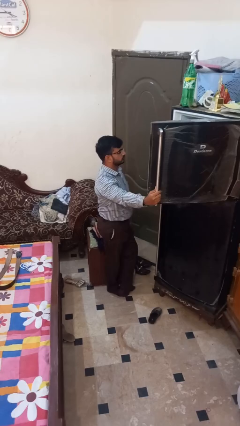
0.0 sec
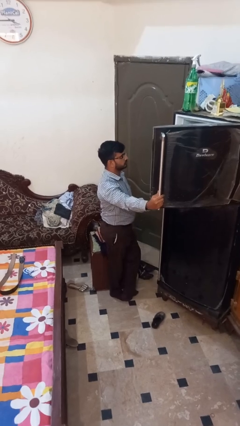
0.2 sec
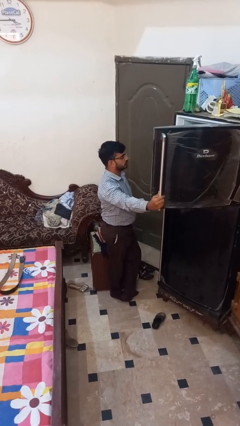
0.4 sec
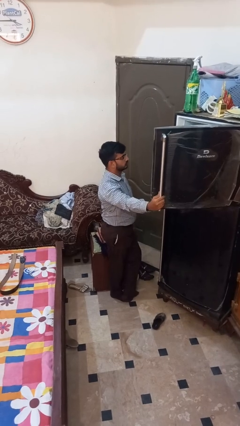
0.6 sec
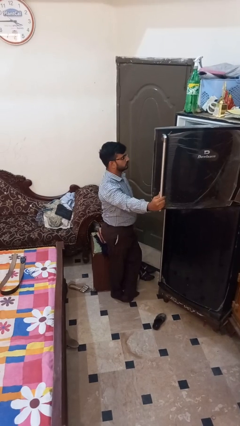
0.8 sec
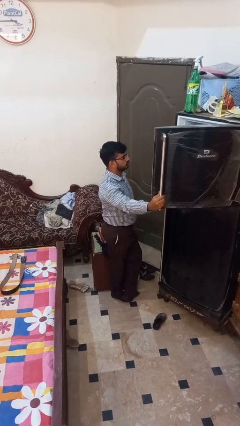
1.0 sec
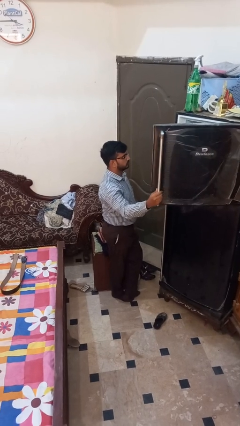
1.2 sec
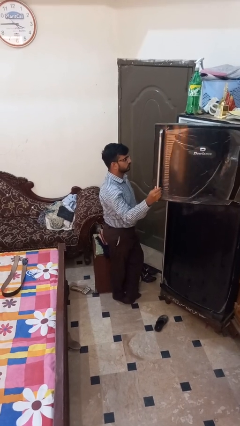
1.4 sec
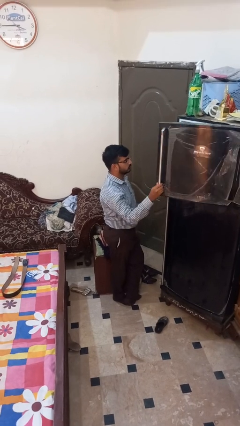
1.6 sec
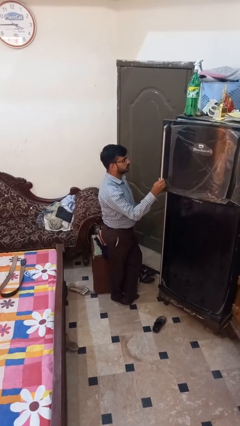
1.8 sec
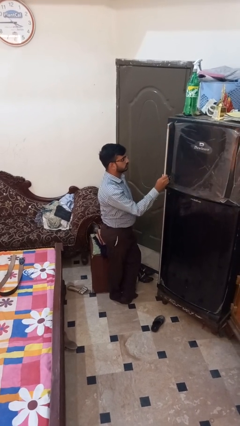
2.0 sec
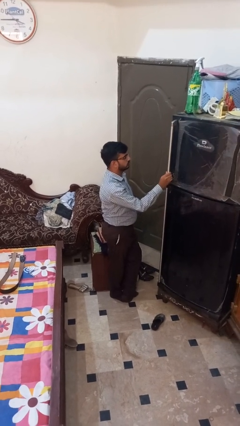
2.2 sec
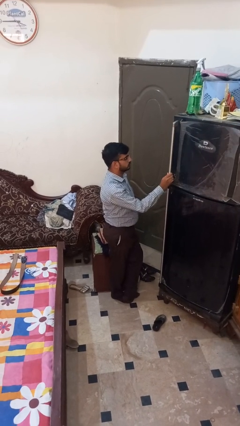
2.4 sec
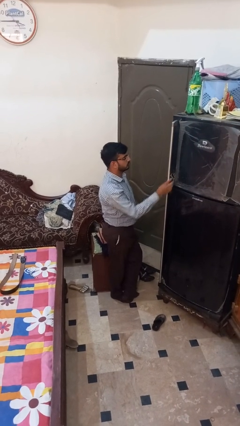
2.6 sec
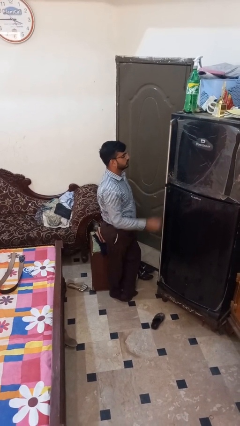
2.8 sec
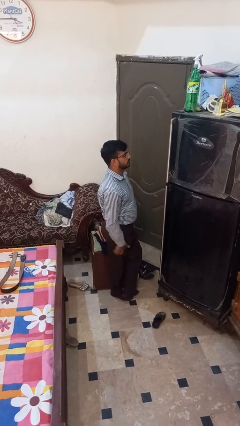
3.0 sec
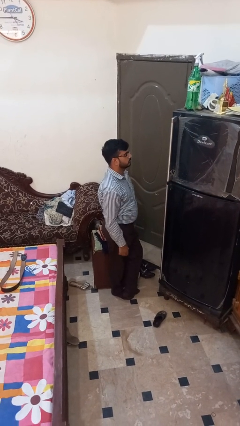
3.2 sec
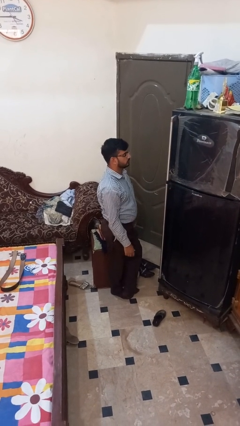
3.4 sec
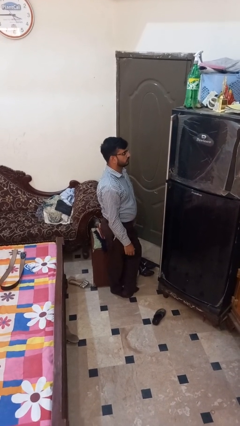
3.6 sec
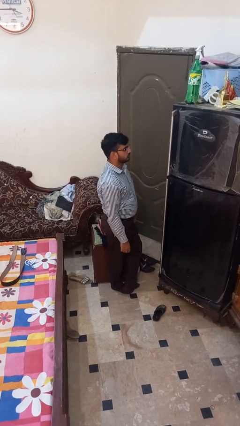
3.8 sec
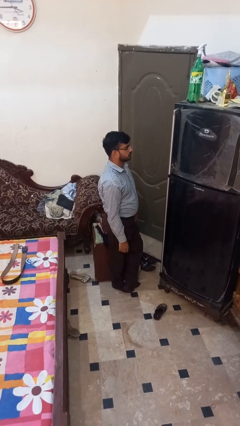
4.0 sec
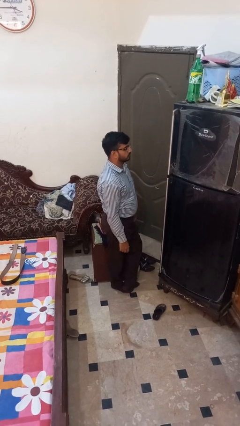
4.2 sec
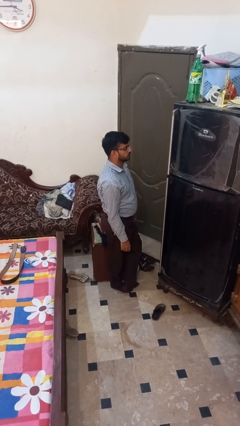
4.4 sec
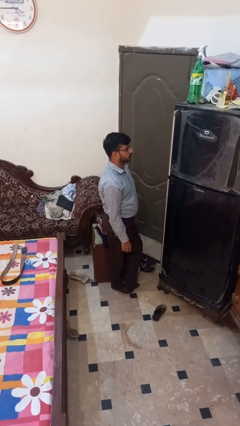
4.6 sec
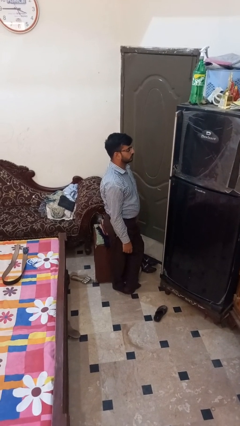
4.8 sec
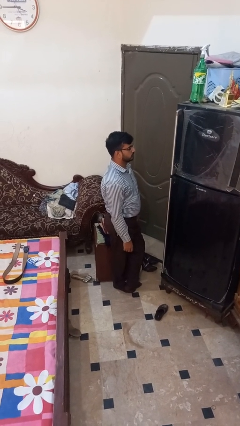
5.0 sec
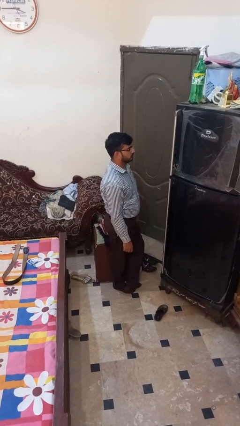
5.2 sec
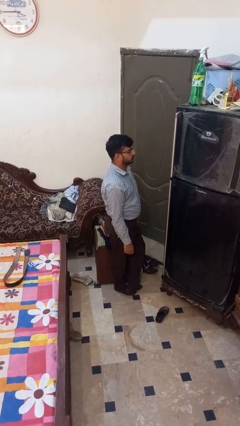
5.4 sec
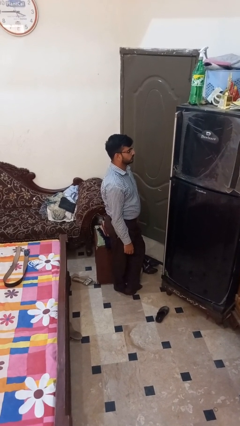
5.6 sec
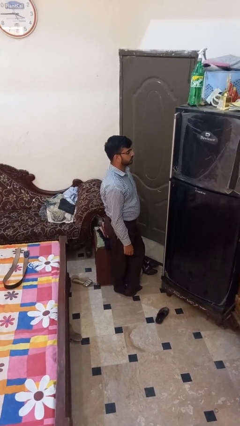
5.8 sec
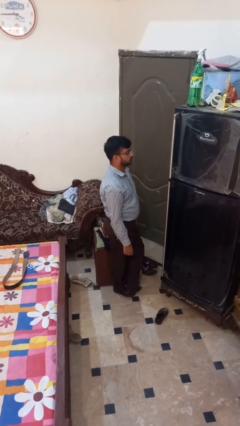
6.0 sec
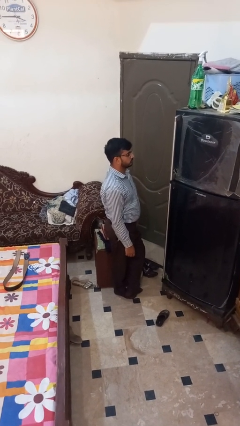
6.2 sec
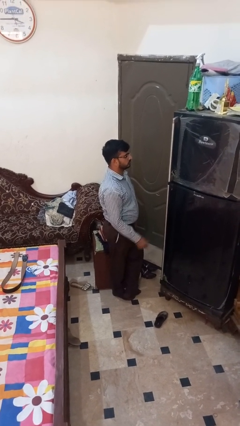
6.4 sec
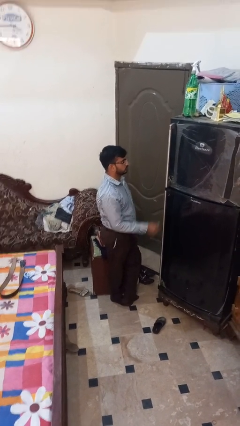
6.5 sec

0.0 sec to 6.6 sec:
person closes refrigerator

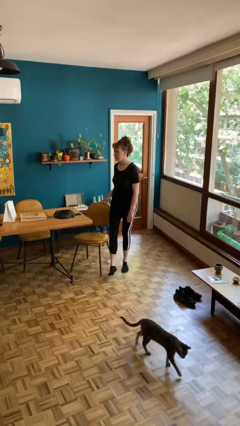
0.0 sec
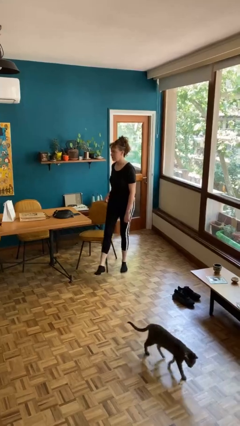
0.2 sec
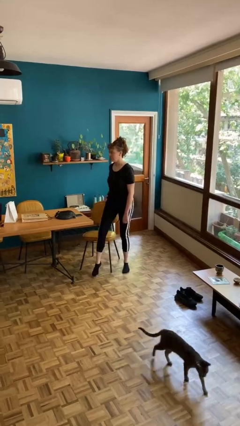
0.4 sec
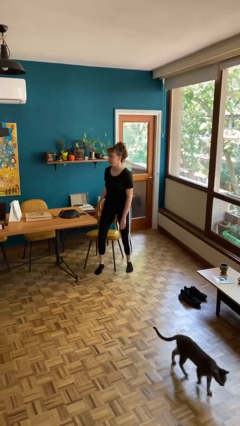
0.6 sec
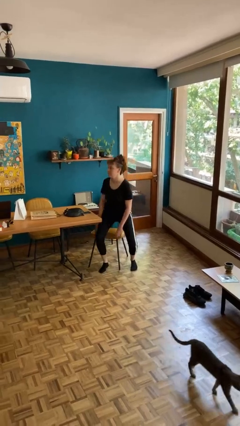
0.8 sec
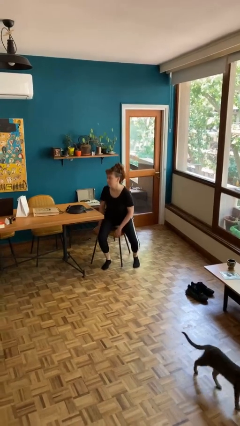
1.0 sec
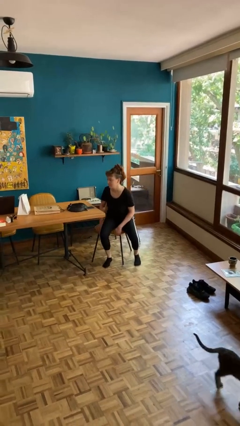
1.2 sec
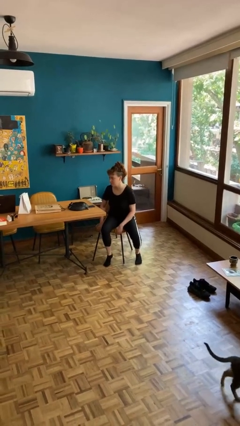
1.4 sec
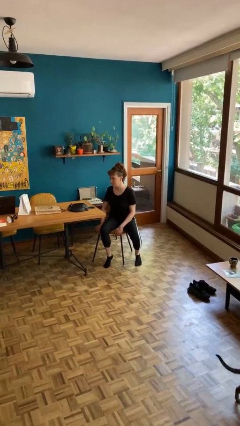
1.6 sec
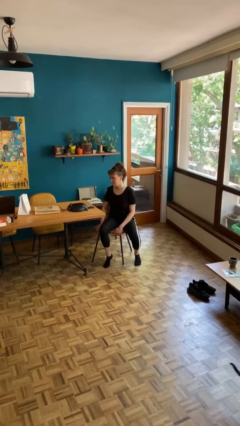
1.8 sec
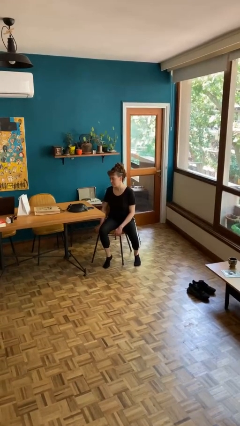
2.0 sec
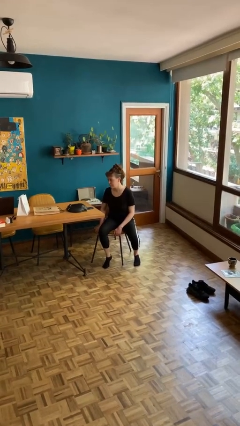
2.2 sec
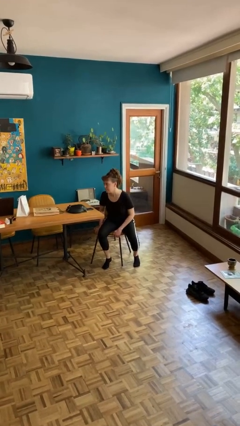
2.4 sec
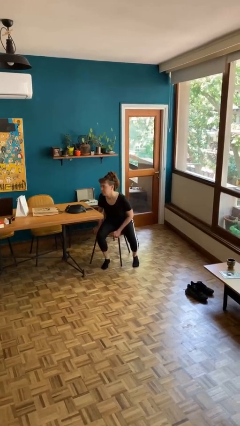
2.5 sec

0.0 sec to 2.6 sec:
person sits down

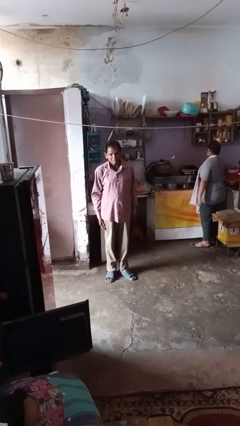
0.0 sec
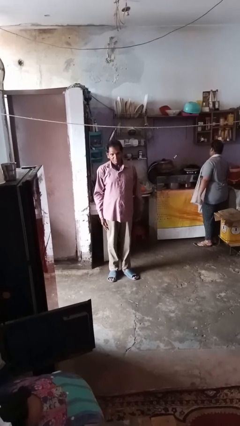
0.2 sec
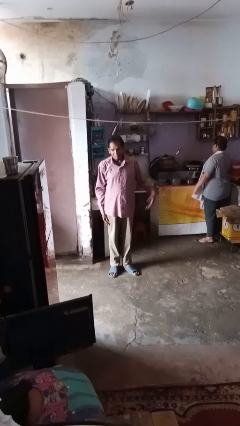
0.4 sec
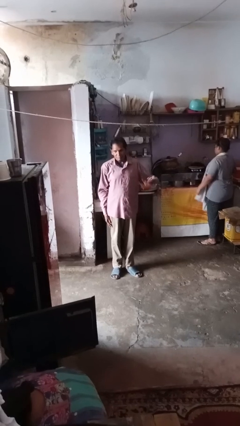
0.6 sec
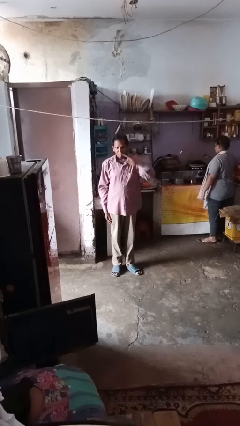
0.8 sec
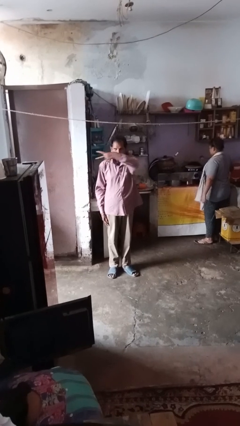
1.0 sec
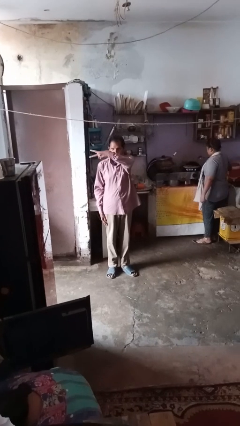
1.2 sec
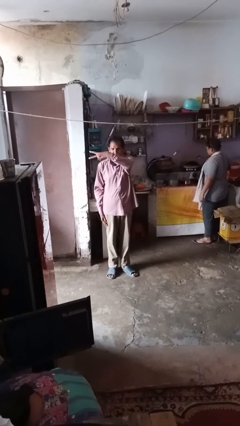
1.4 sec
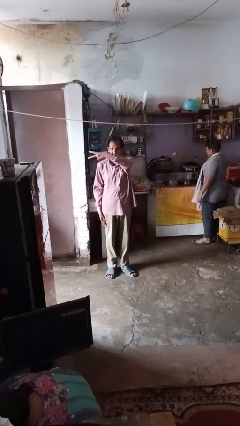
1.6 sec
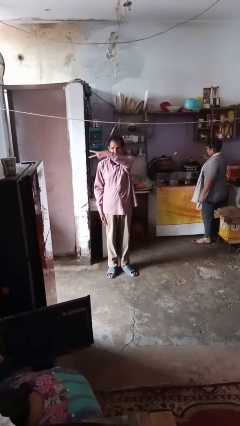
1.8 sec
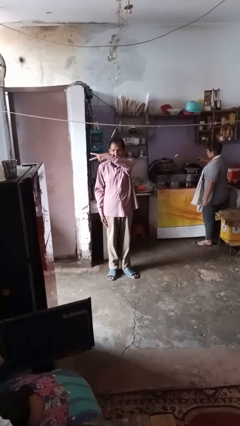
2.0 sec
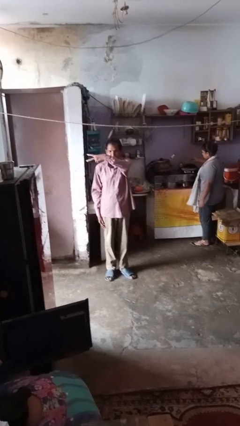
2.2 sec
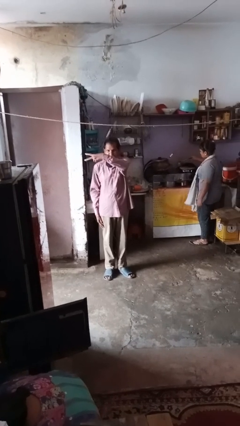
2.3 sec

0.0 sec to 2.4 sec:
person gestures behind me

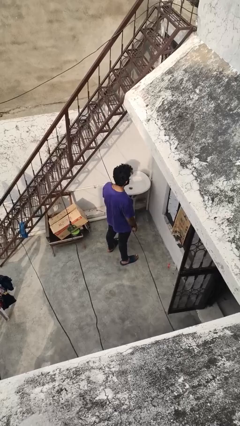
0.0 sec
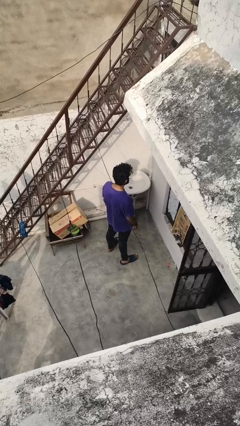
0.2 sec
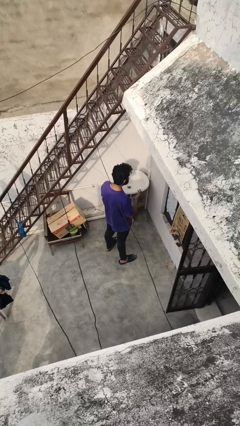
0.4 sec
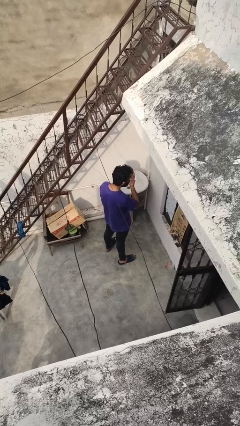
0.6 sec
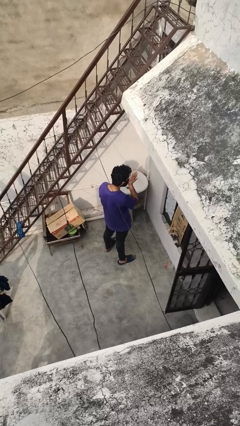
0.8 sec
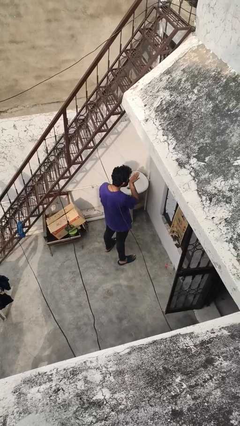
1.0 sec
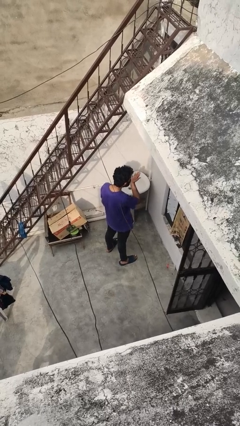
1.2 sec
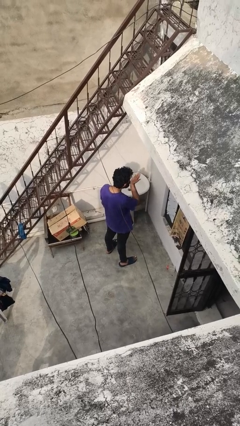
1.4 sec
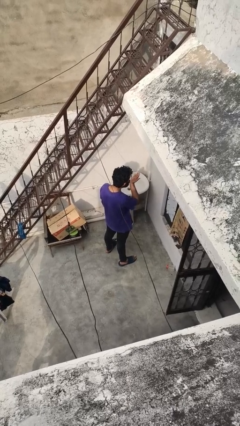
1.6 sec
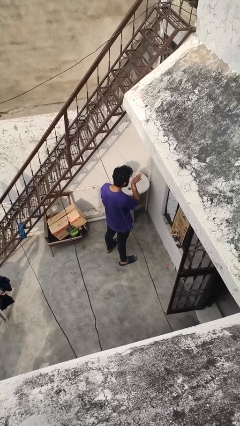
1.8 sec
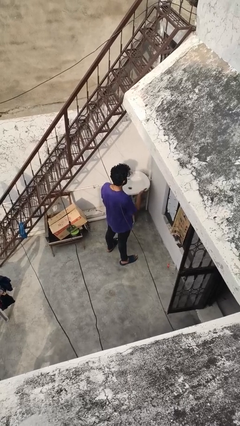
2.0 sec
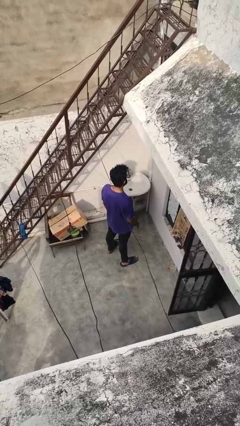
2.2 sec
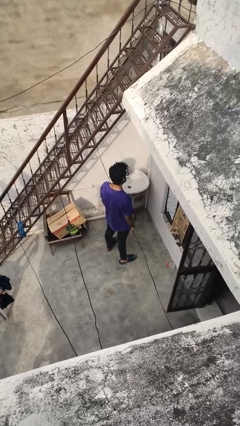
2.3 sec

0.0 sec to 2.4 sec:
person gestures blow kiss

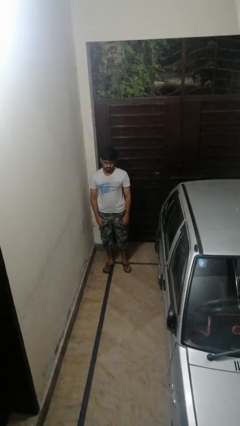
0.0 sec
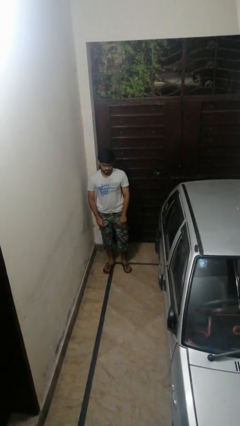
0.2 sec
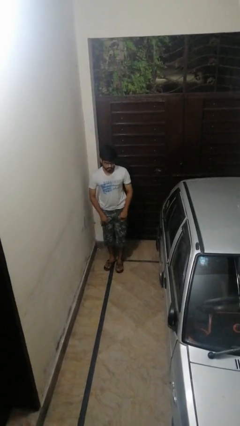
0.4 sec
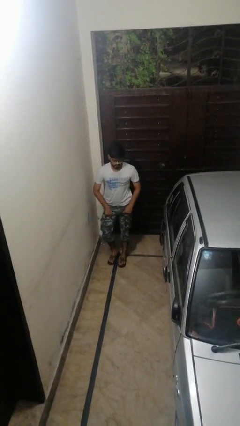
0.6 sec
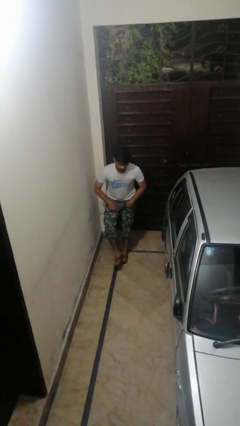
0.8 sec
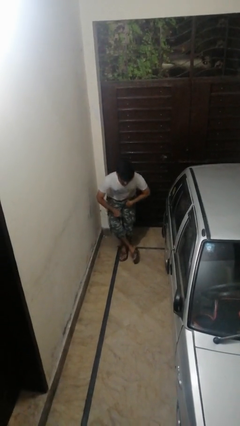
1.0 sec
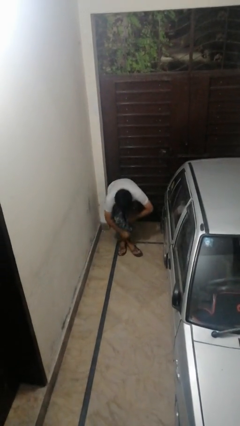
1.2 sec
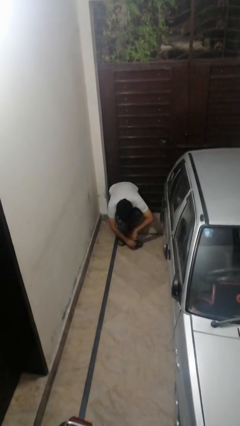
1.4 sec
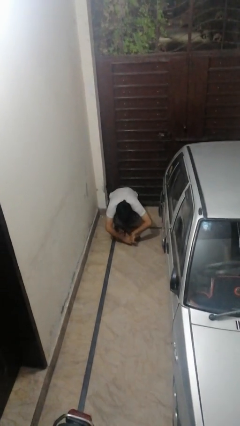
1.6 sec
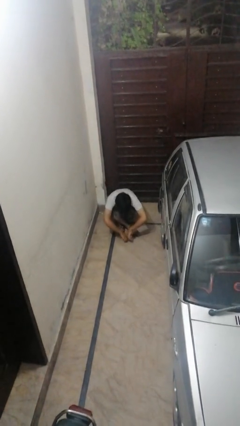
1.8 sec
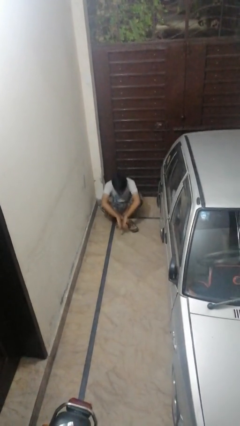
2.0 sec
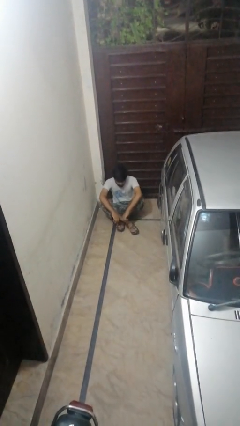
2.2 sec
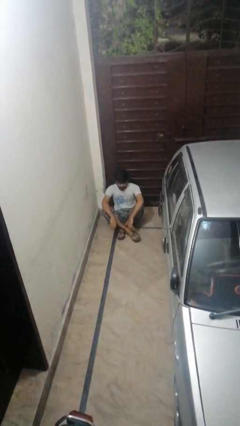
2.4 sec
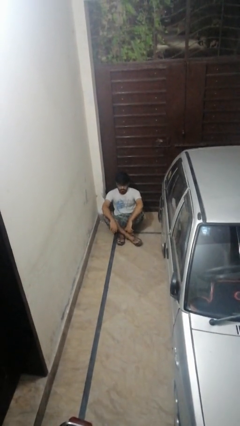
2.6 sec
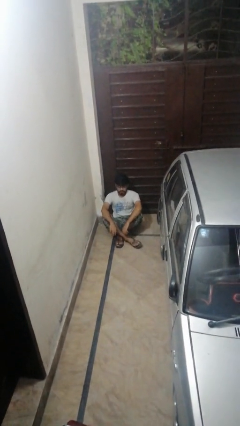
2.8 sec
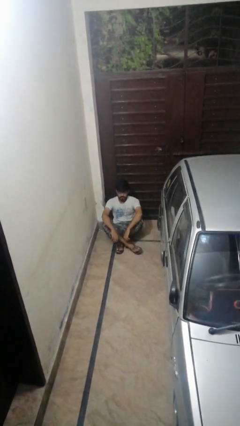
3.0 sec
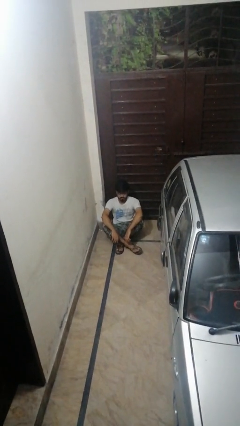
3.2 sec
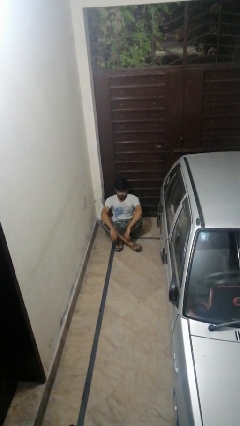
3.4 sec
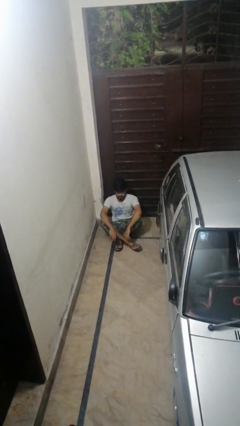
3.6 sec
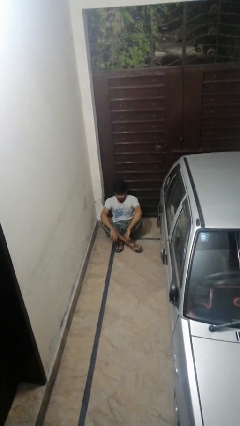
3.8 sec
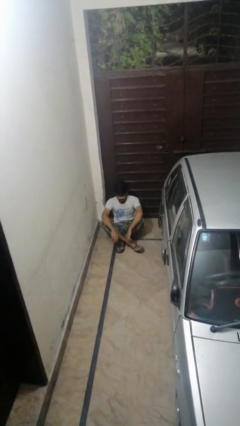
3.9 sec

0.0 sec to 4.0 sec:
person sits crisscross
